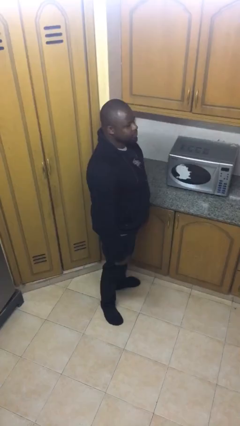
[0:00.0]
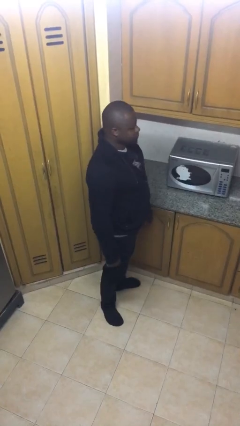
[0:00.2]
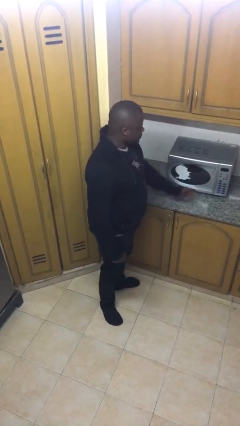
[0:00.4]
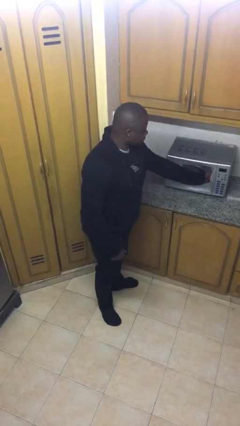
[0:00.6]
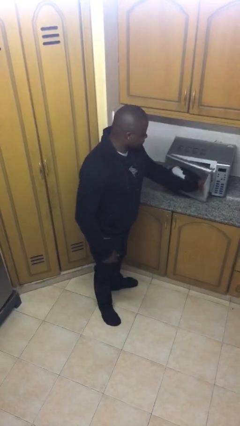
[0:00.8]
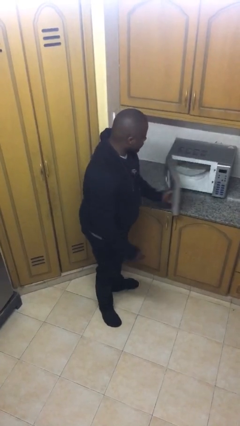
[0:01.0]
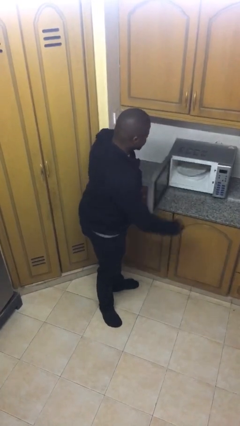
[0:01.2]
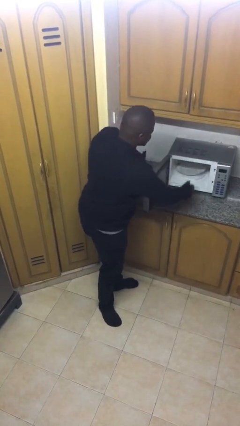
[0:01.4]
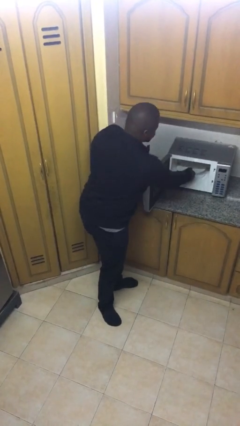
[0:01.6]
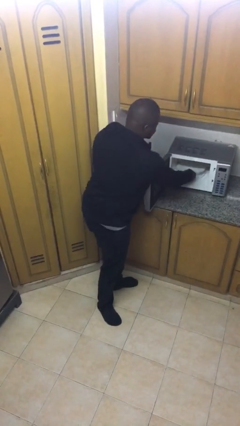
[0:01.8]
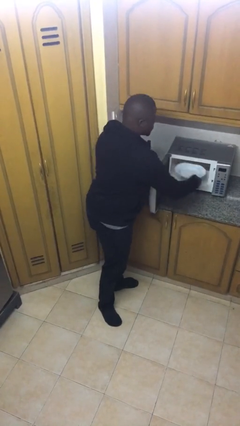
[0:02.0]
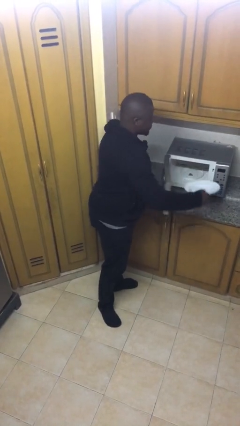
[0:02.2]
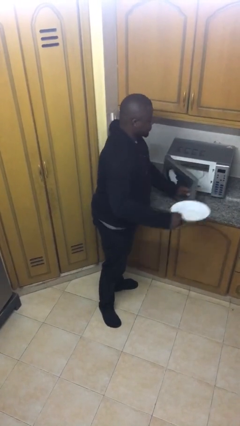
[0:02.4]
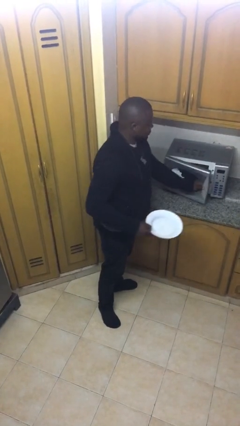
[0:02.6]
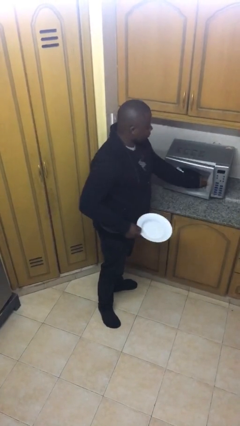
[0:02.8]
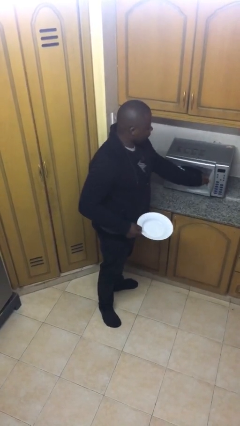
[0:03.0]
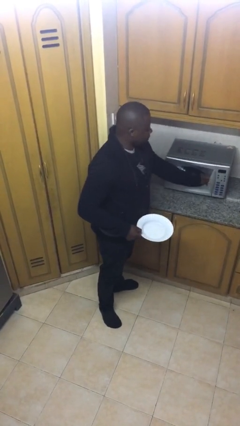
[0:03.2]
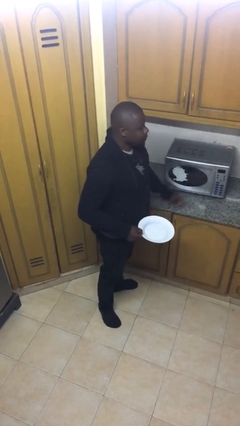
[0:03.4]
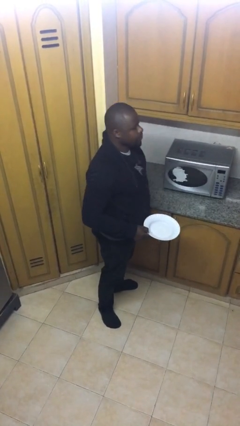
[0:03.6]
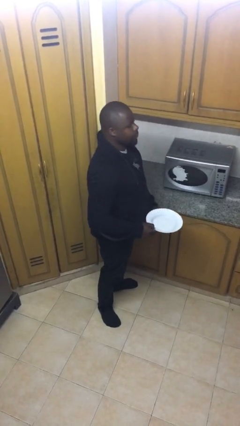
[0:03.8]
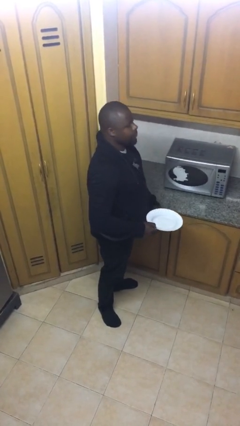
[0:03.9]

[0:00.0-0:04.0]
person takes object from microwave

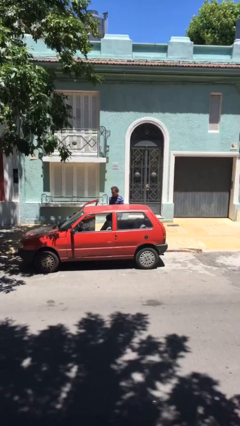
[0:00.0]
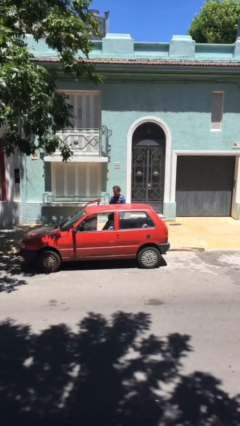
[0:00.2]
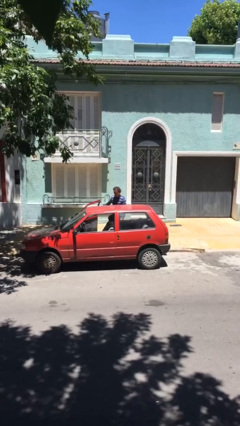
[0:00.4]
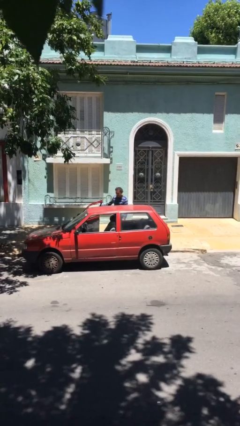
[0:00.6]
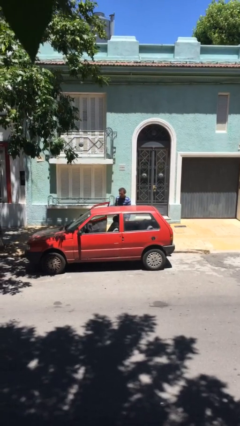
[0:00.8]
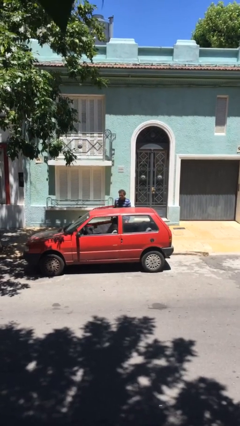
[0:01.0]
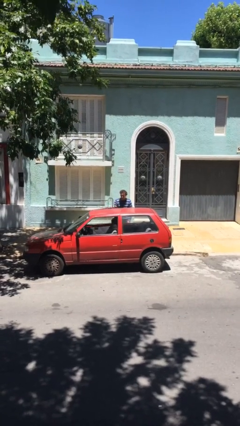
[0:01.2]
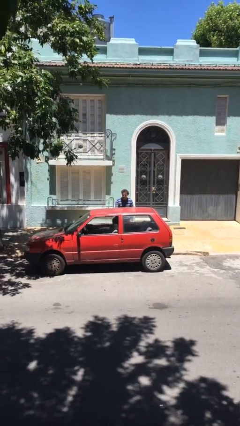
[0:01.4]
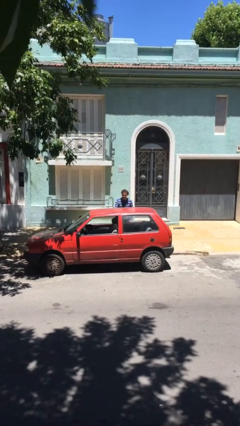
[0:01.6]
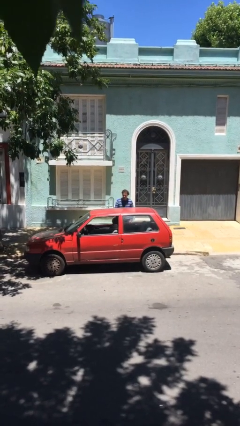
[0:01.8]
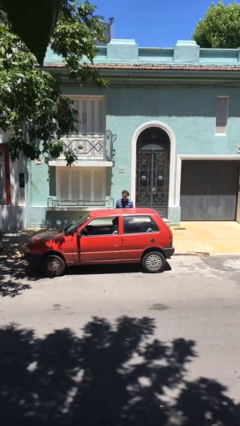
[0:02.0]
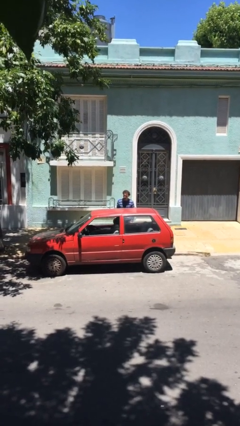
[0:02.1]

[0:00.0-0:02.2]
person closes car door

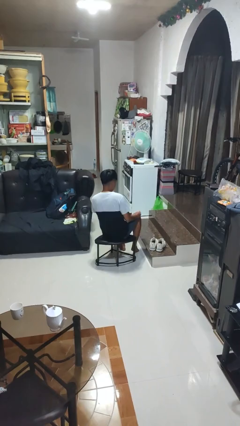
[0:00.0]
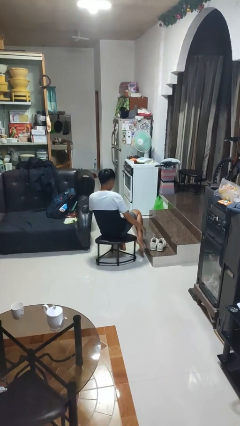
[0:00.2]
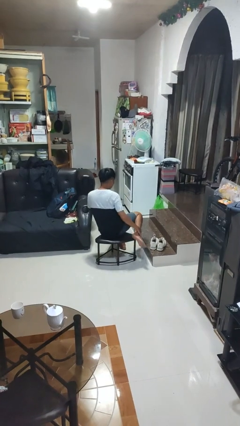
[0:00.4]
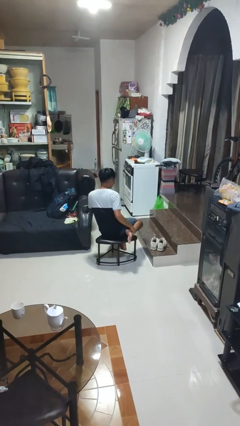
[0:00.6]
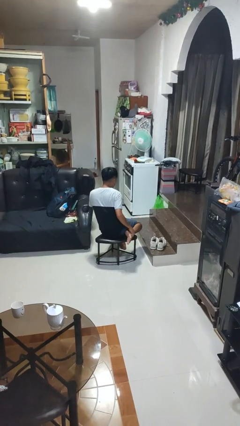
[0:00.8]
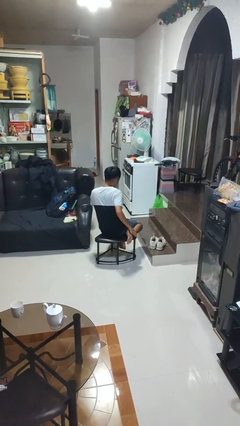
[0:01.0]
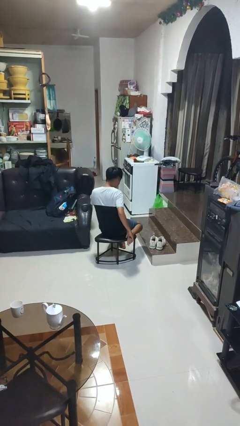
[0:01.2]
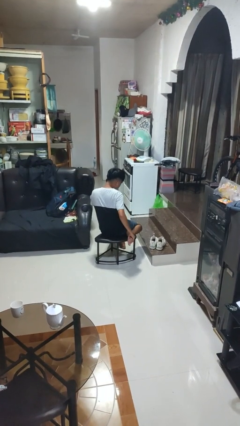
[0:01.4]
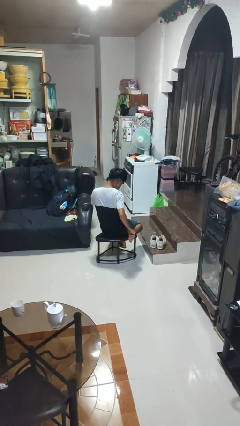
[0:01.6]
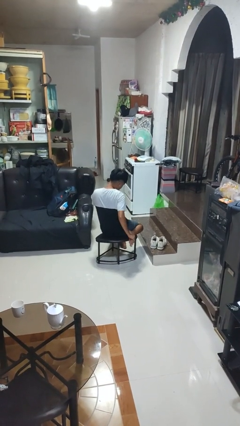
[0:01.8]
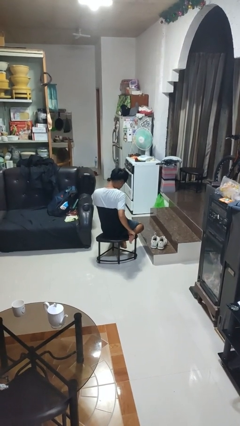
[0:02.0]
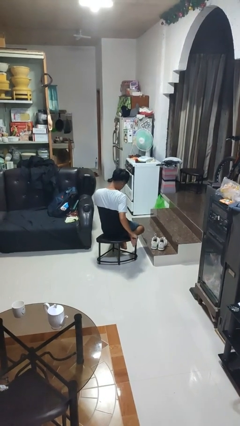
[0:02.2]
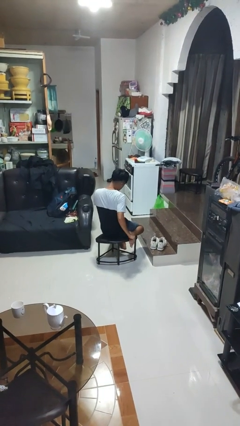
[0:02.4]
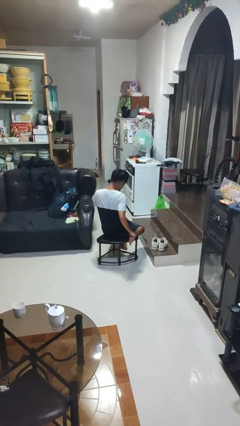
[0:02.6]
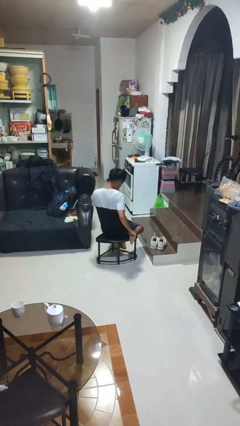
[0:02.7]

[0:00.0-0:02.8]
person rubs foot

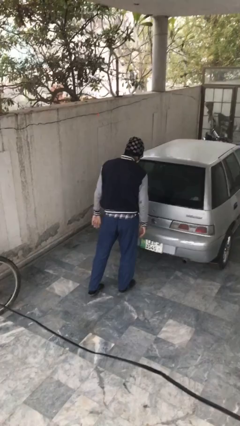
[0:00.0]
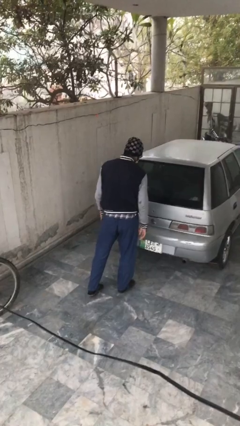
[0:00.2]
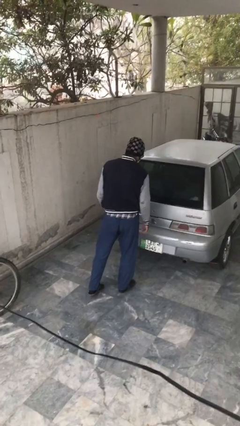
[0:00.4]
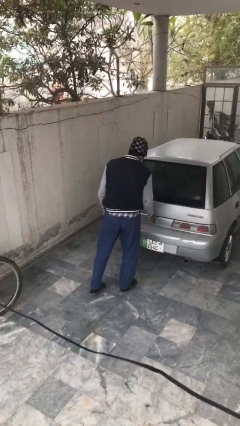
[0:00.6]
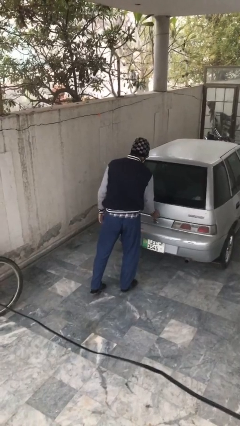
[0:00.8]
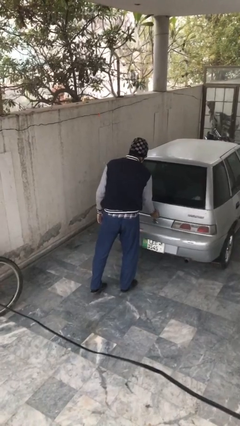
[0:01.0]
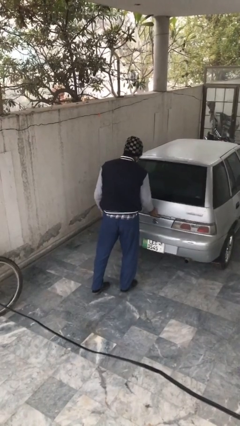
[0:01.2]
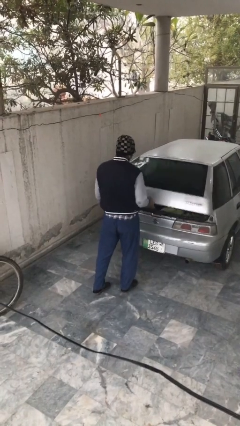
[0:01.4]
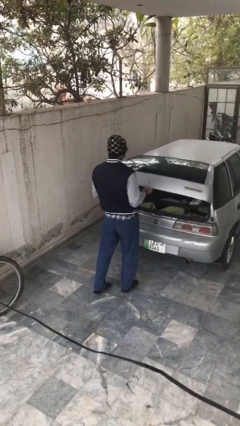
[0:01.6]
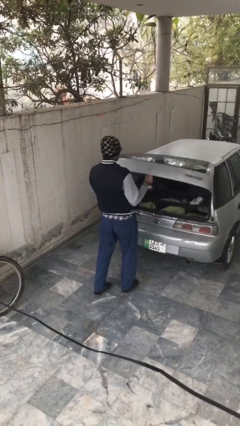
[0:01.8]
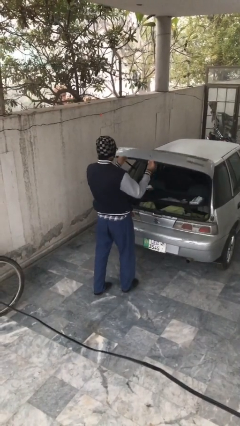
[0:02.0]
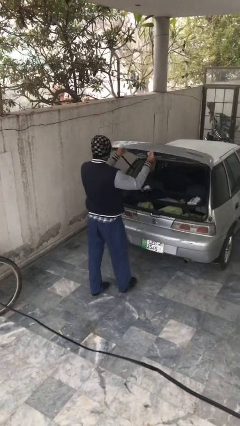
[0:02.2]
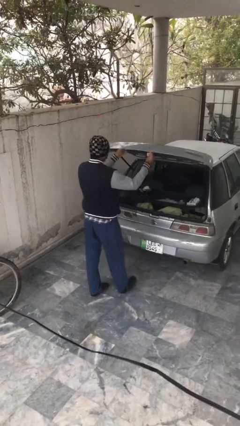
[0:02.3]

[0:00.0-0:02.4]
person opens car trunk

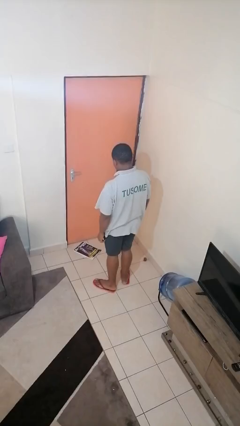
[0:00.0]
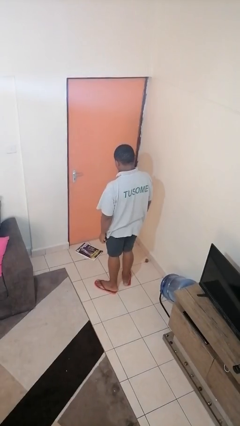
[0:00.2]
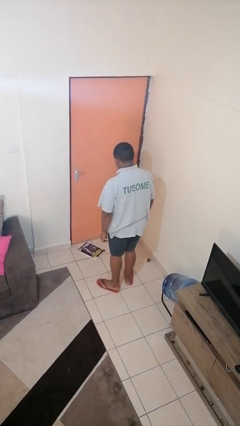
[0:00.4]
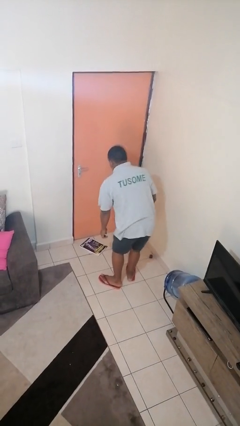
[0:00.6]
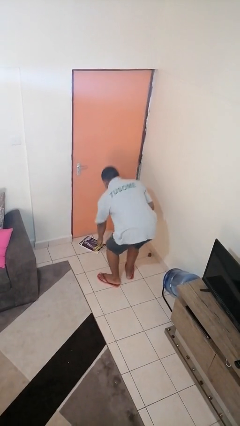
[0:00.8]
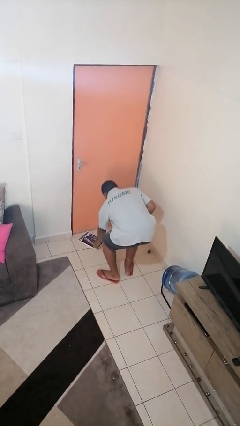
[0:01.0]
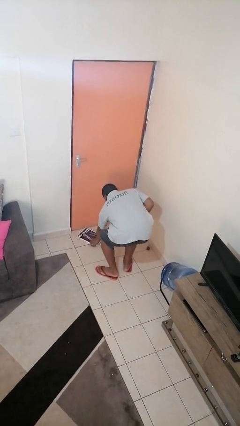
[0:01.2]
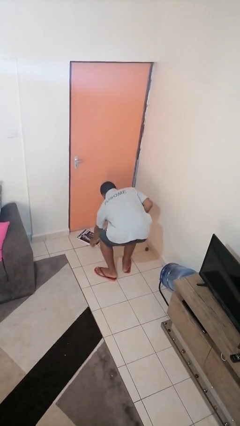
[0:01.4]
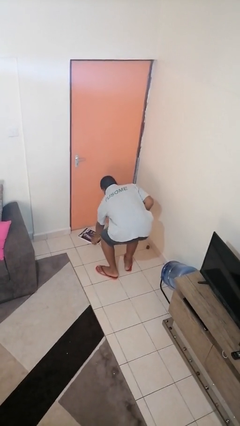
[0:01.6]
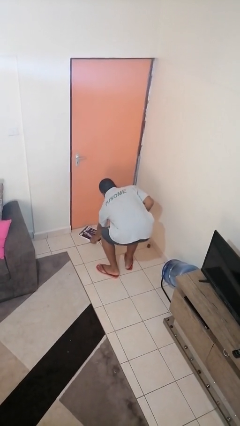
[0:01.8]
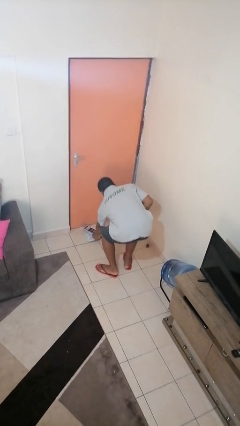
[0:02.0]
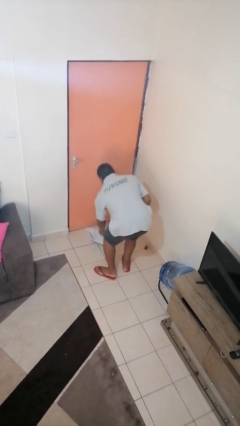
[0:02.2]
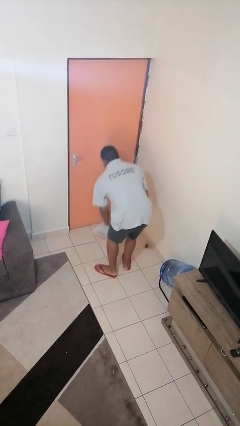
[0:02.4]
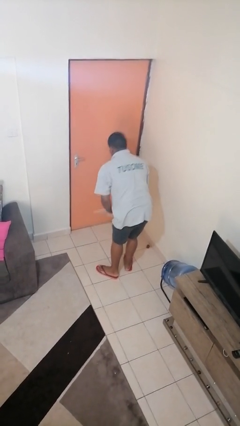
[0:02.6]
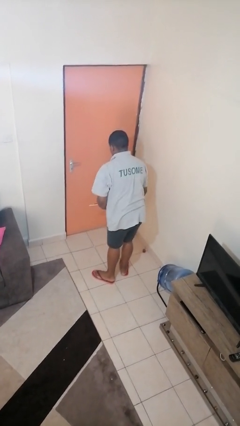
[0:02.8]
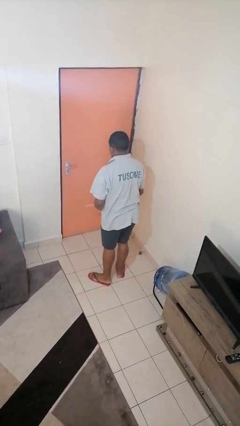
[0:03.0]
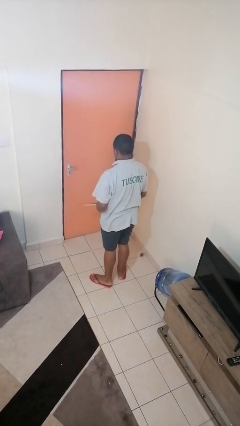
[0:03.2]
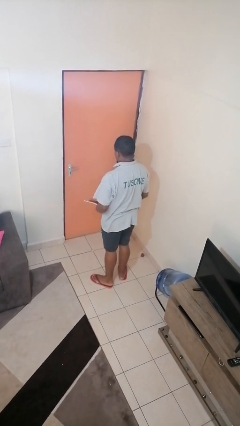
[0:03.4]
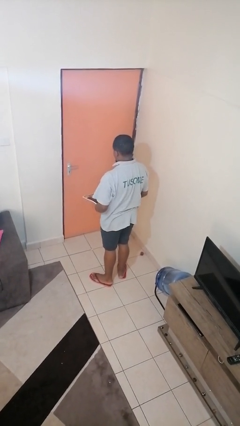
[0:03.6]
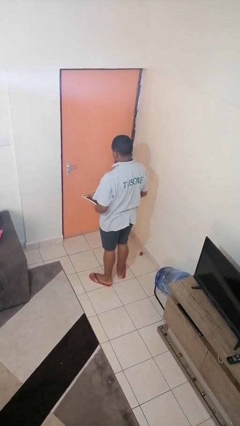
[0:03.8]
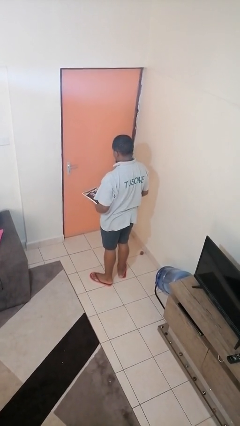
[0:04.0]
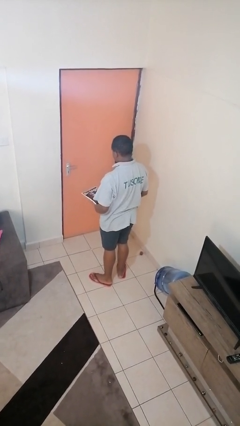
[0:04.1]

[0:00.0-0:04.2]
person picks up object from floor

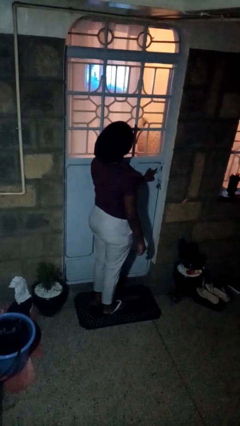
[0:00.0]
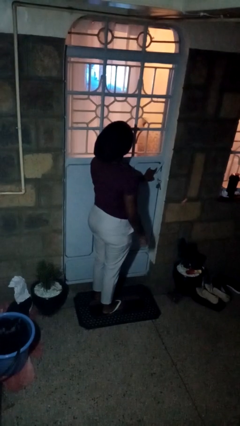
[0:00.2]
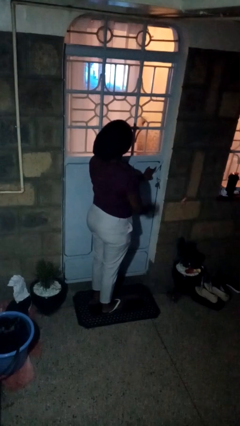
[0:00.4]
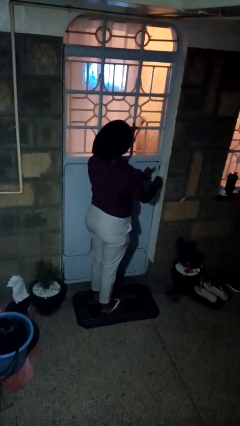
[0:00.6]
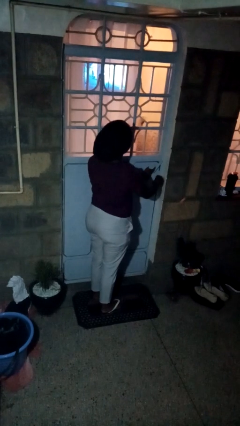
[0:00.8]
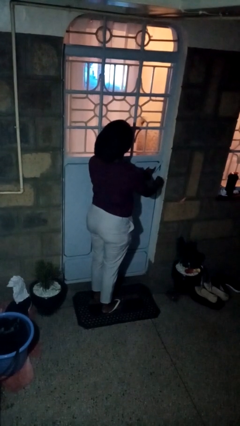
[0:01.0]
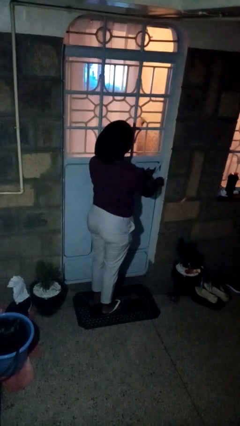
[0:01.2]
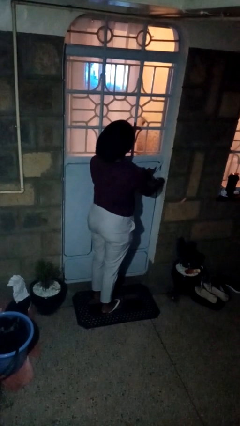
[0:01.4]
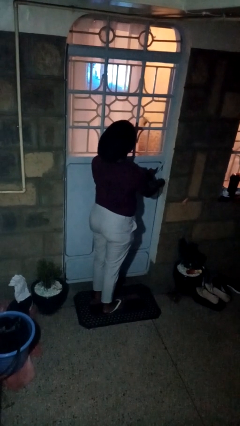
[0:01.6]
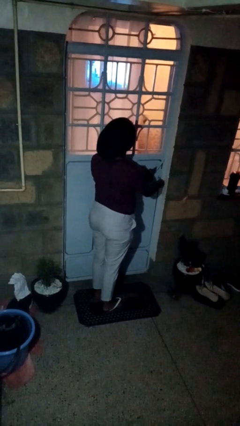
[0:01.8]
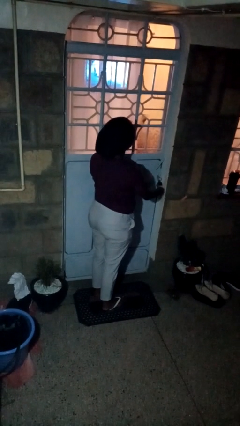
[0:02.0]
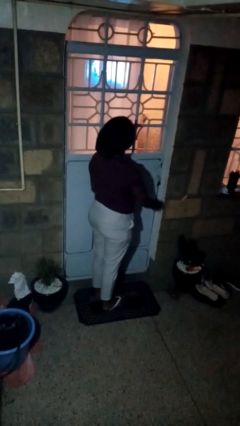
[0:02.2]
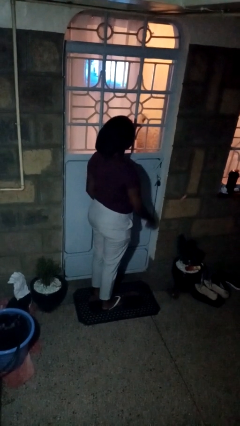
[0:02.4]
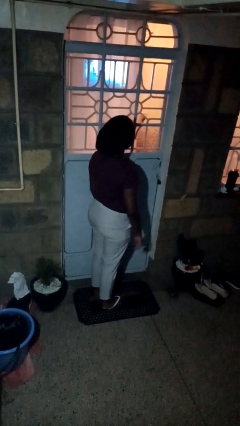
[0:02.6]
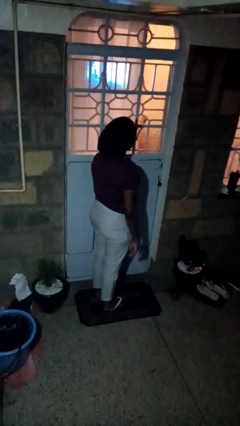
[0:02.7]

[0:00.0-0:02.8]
person locks door with keys
